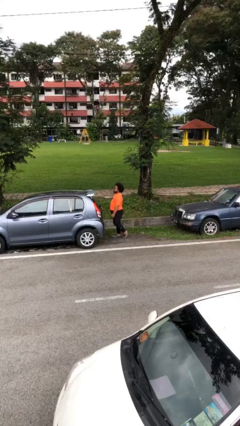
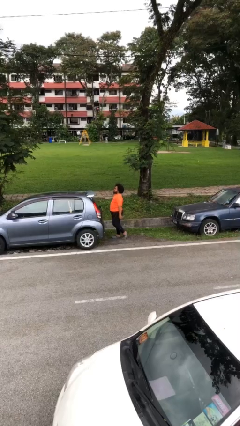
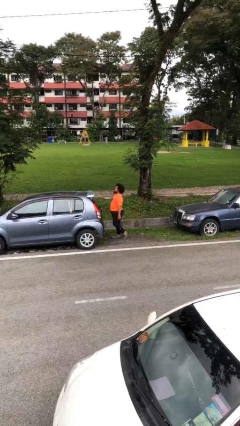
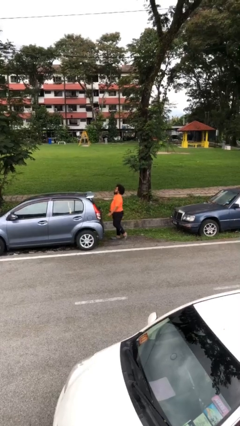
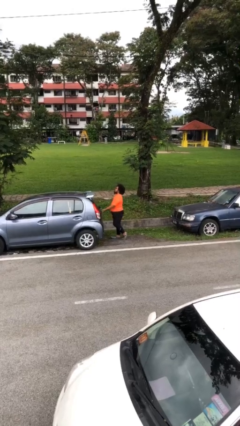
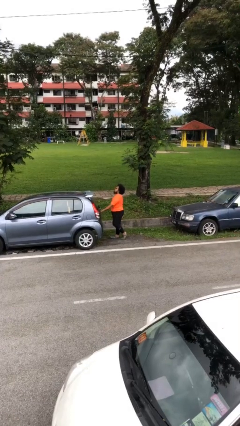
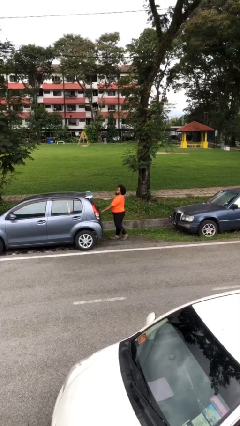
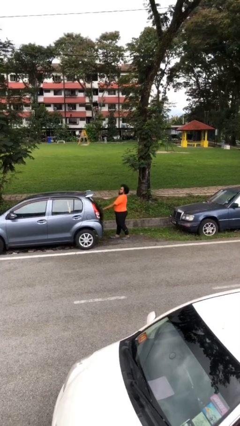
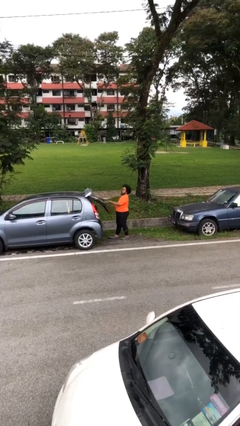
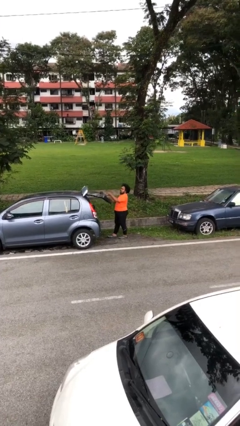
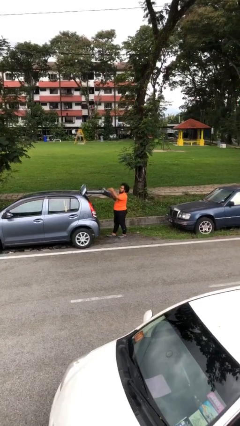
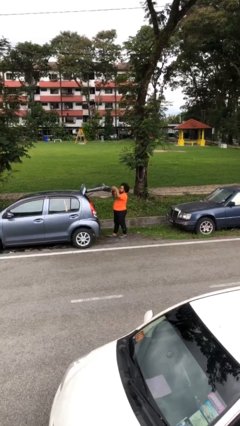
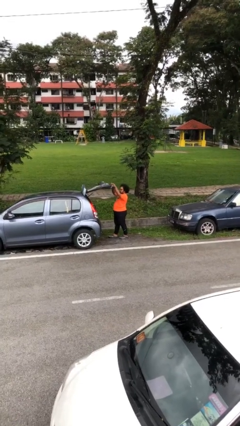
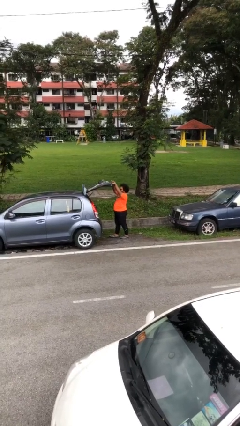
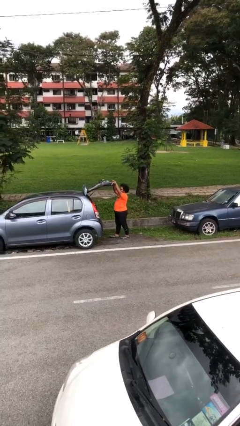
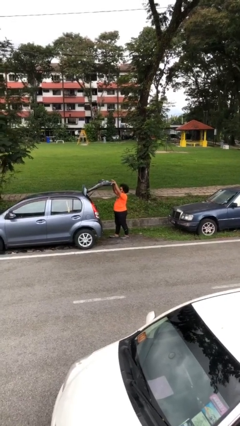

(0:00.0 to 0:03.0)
person opens car trunk

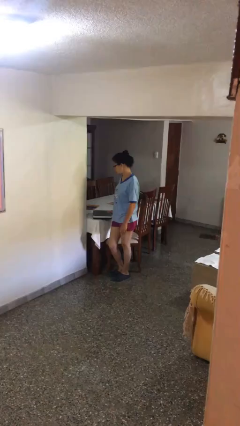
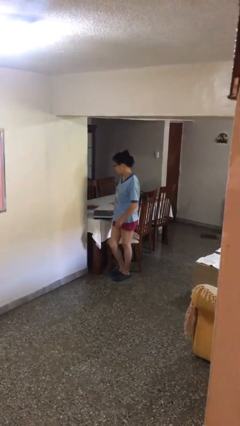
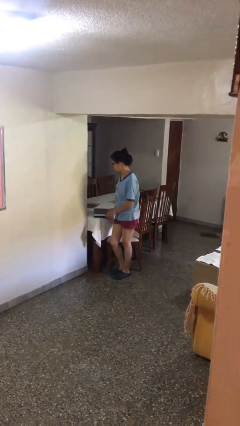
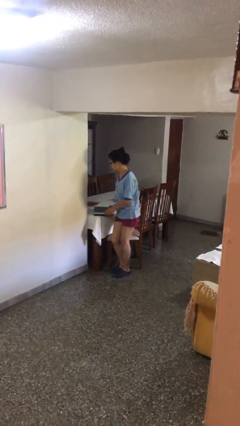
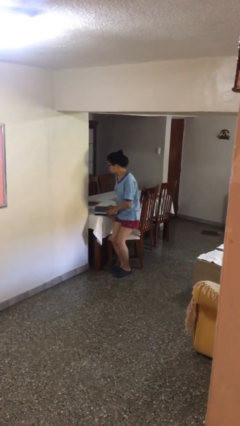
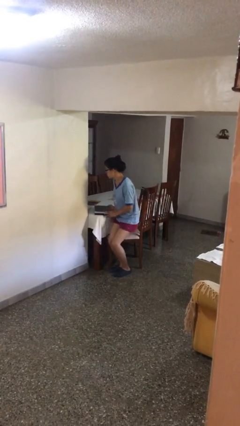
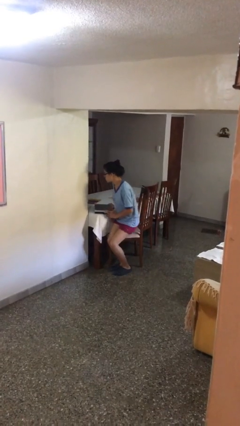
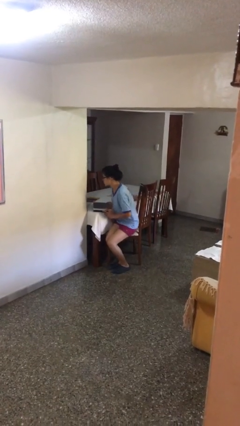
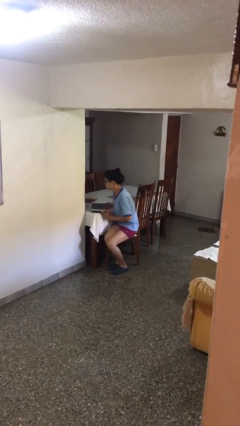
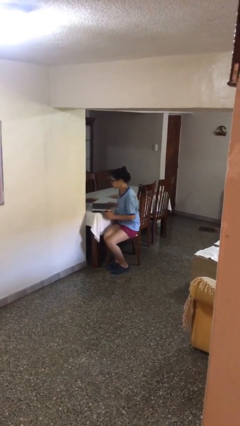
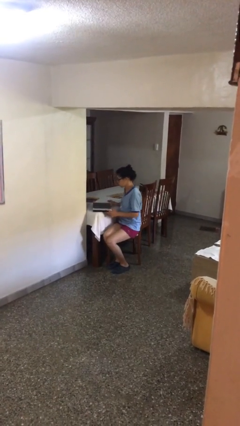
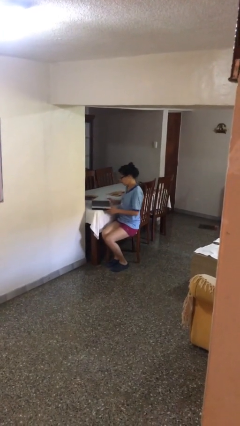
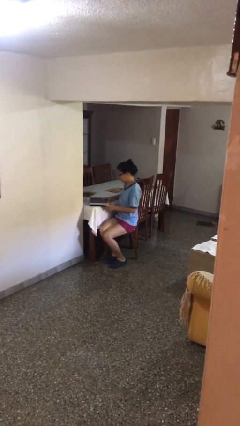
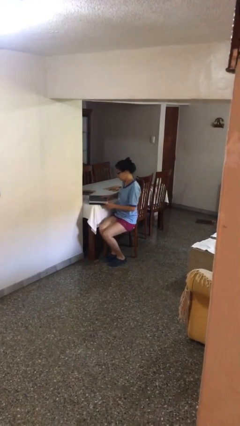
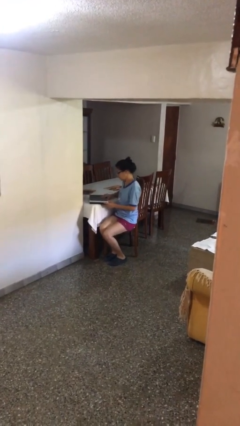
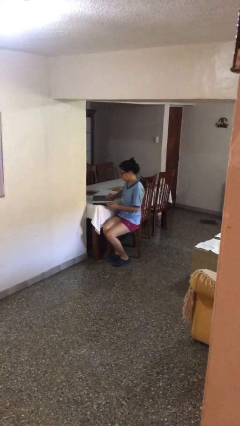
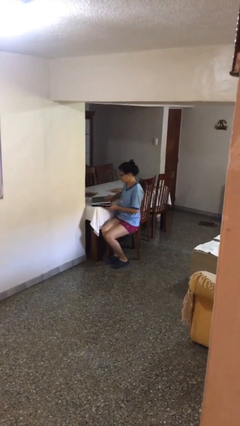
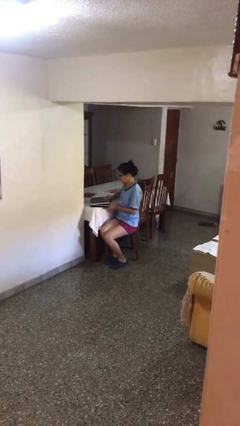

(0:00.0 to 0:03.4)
person sits down

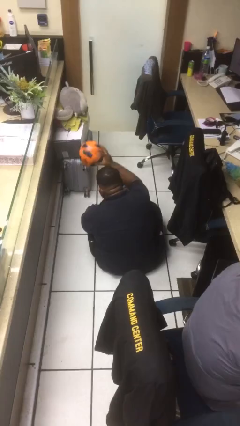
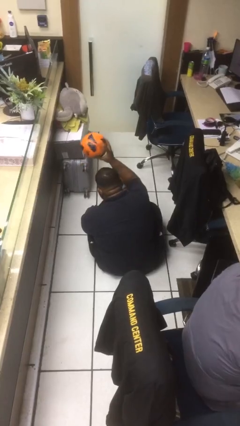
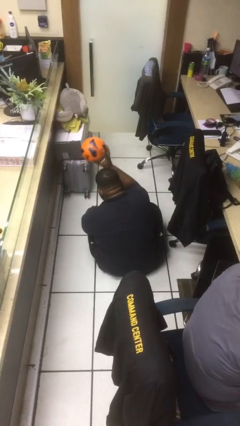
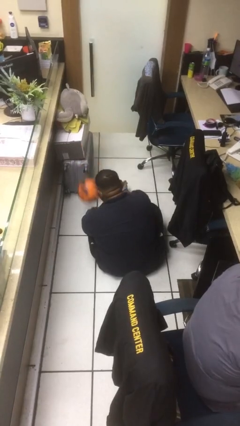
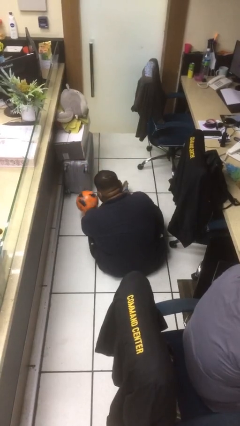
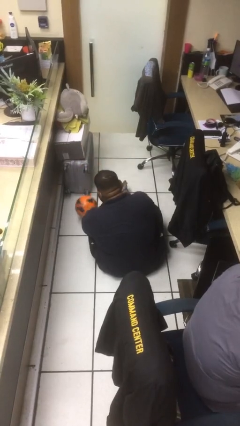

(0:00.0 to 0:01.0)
person bounces ball on floor

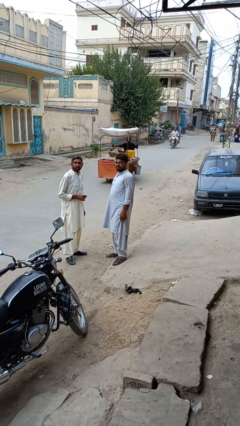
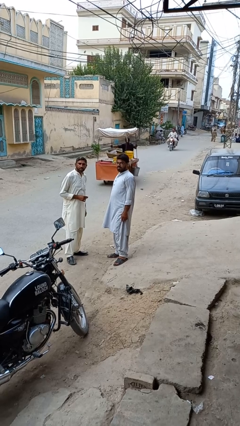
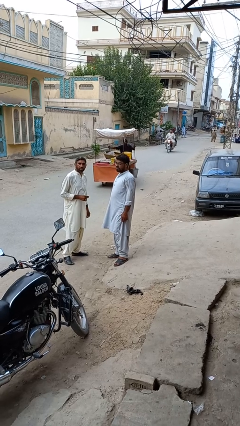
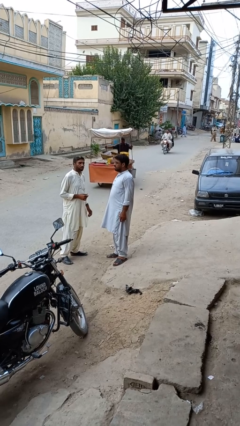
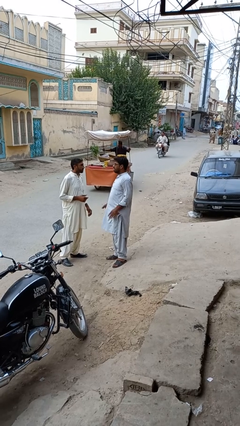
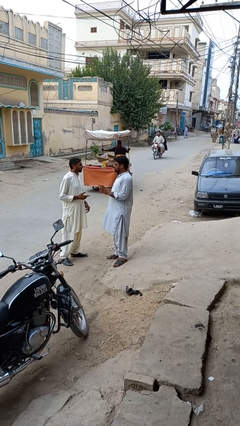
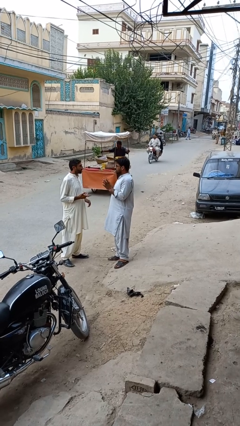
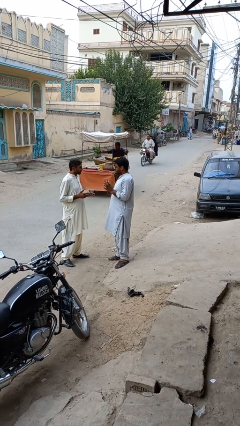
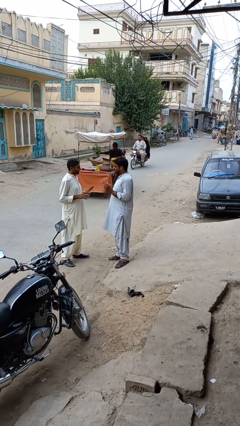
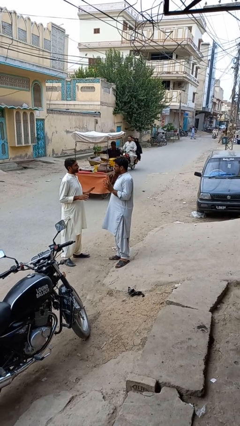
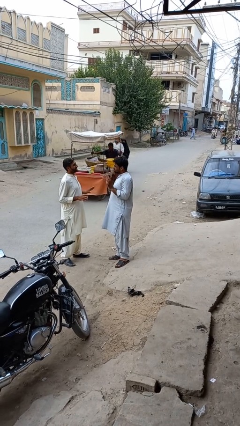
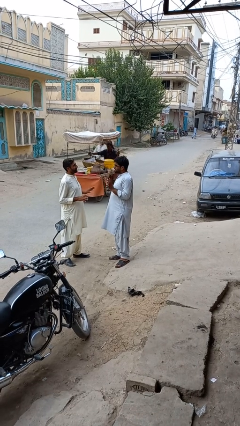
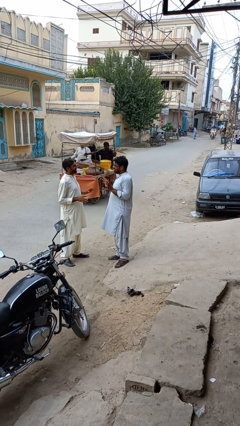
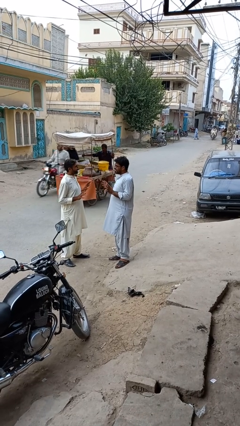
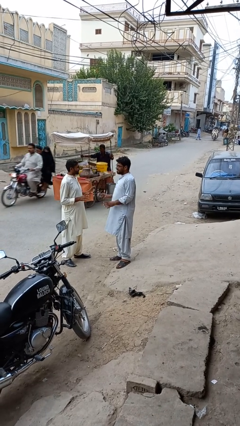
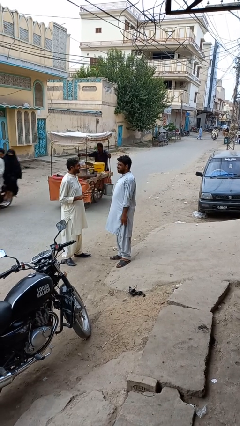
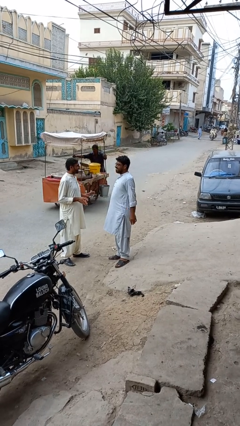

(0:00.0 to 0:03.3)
person talks to person

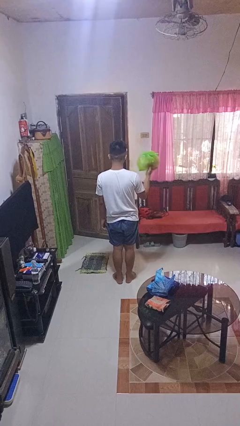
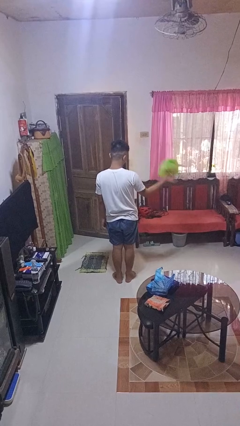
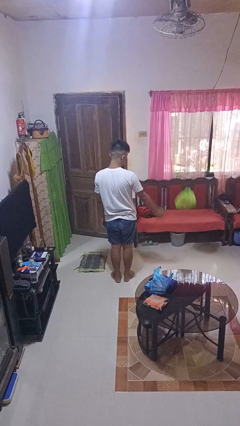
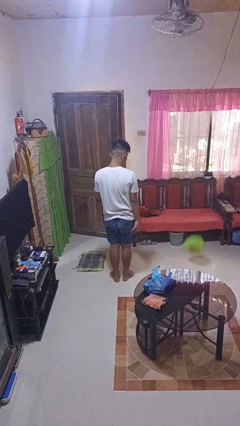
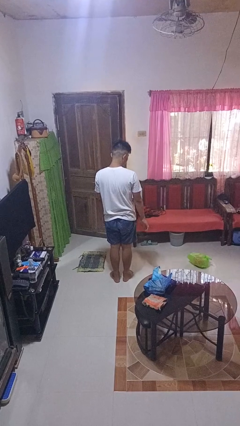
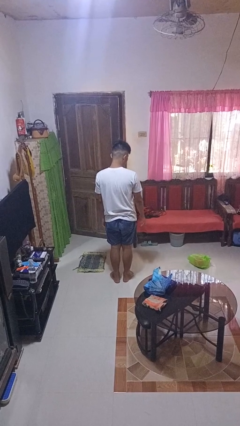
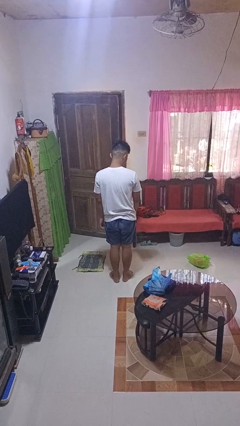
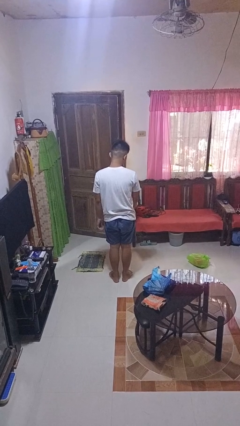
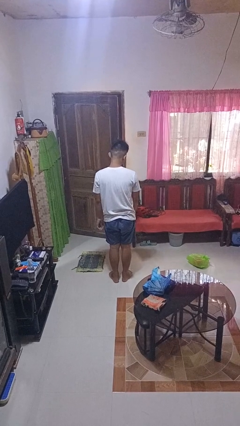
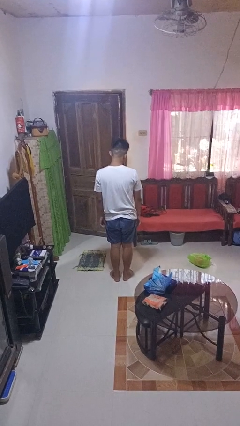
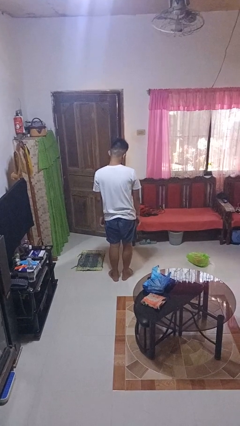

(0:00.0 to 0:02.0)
person throws object to ground

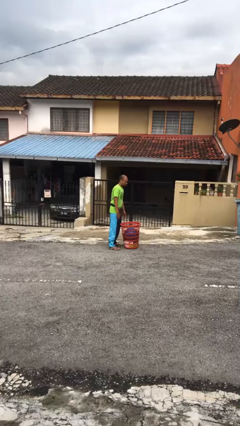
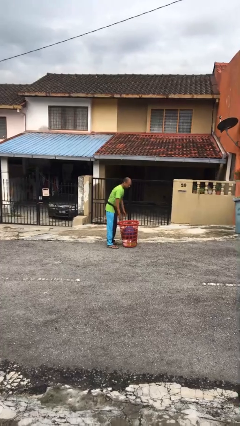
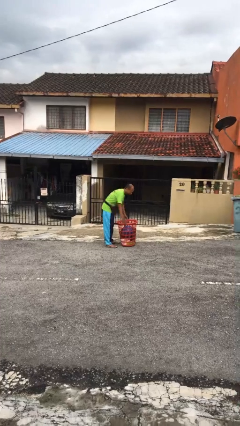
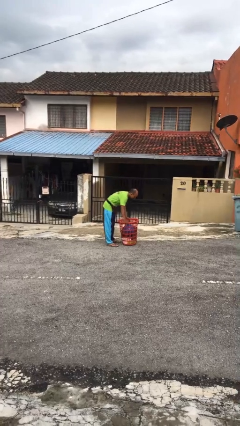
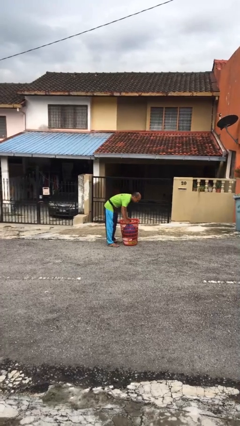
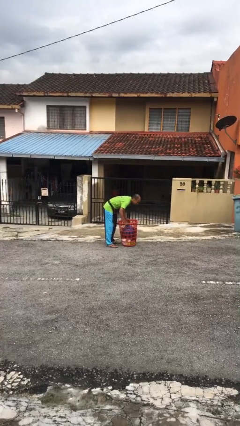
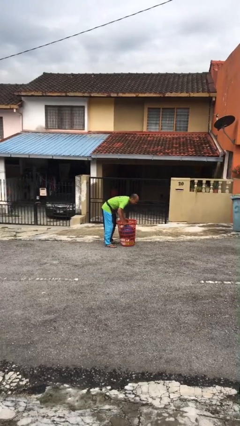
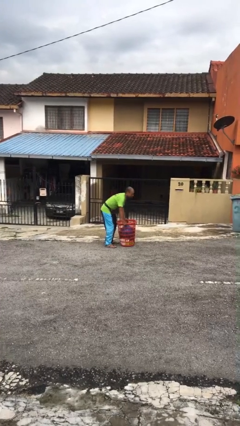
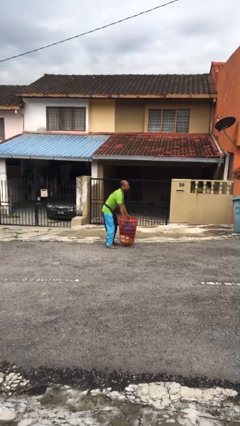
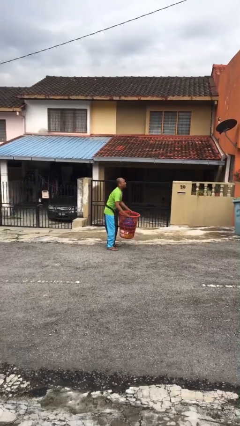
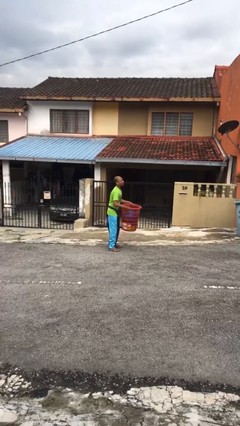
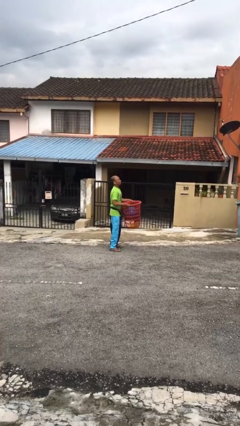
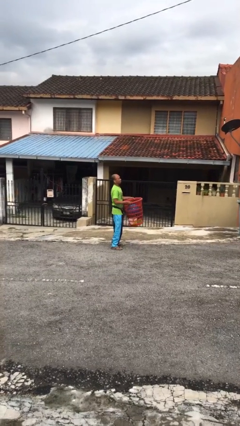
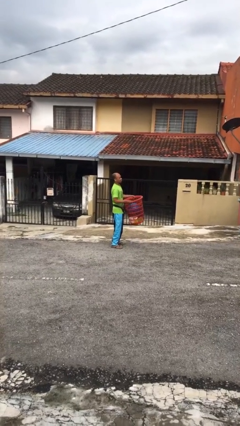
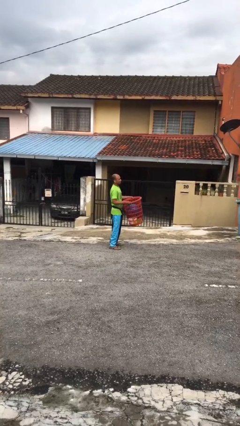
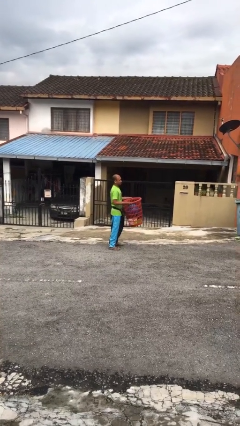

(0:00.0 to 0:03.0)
person picks up object from floor

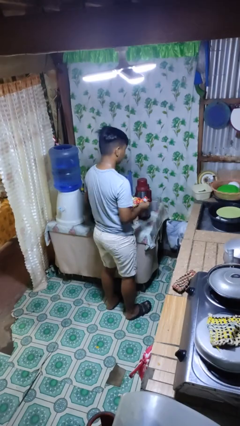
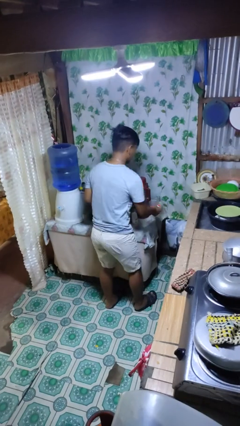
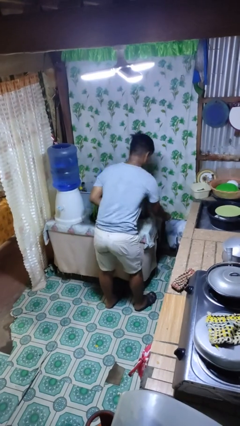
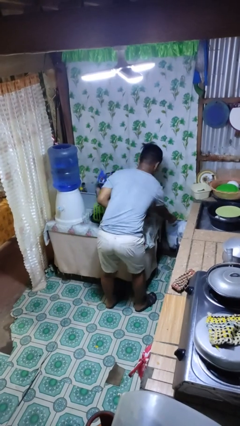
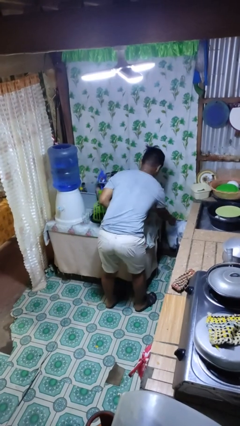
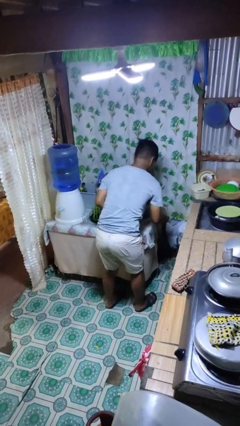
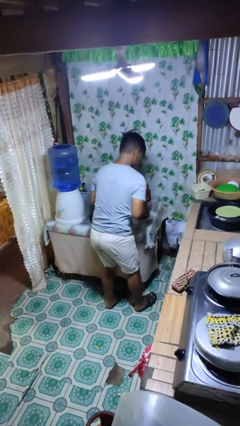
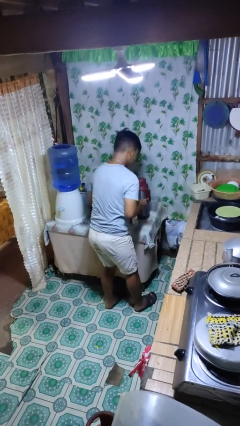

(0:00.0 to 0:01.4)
person discards trash
